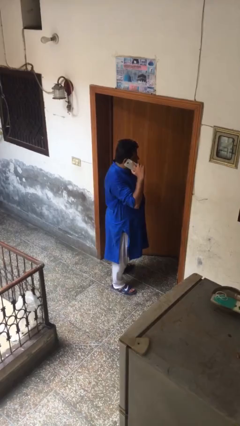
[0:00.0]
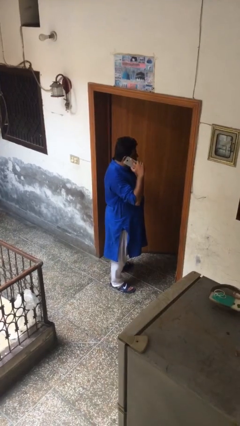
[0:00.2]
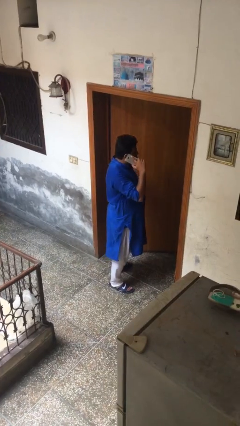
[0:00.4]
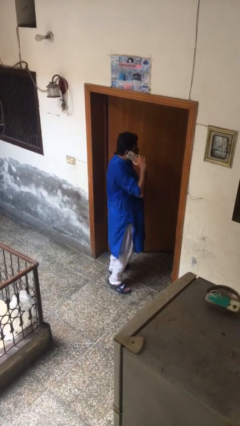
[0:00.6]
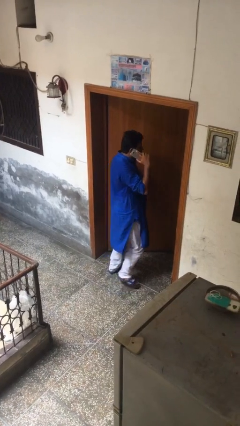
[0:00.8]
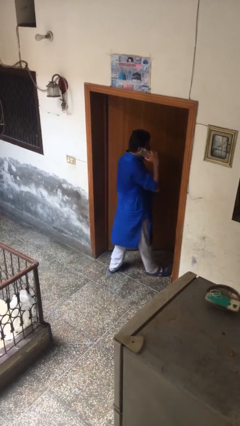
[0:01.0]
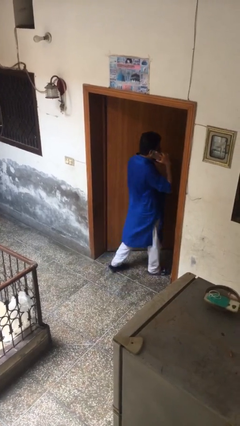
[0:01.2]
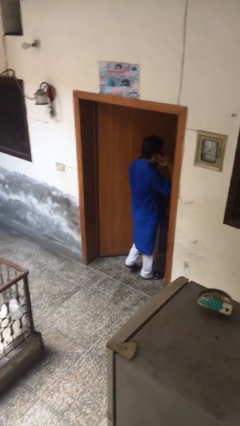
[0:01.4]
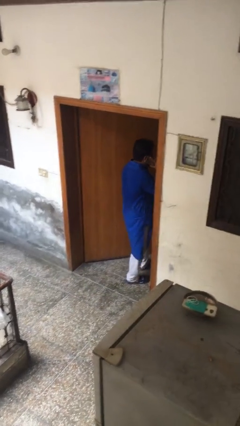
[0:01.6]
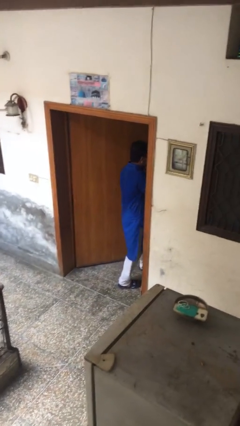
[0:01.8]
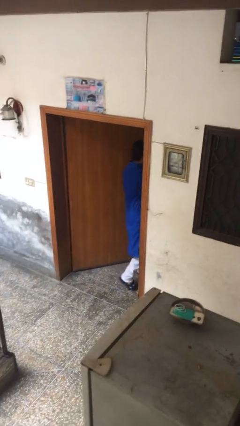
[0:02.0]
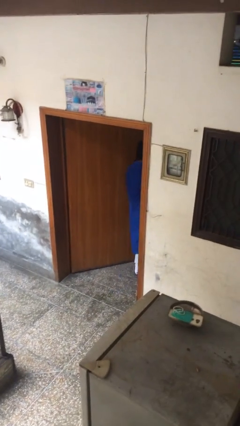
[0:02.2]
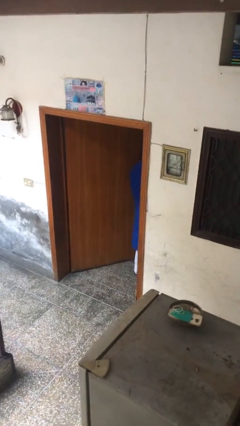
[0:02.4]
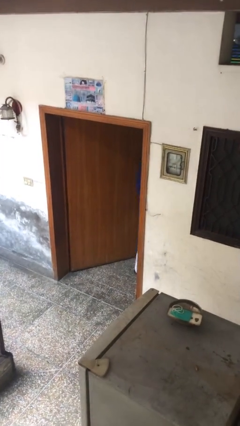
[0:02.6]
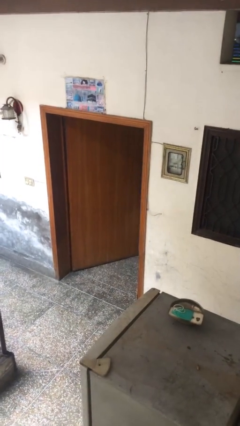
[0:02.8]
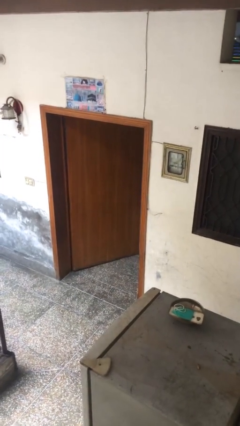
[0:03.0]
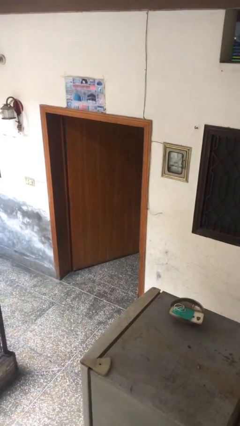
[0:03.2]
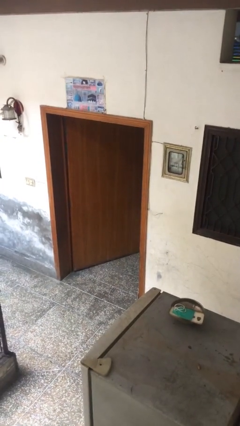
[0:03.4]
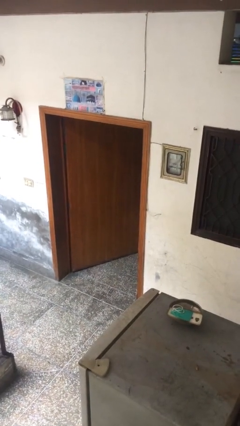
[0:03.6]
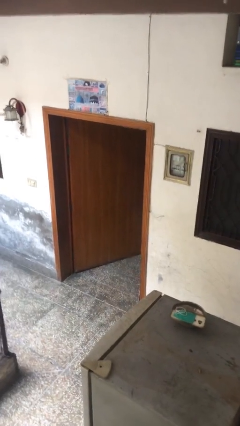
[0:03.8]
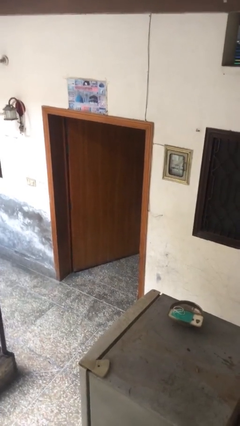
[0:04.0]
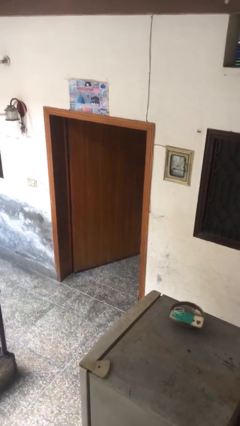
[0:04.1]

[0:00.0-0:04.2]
person exits scene through structure

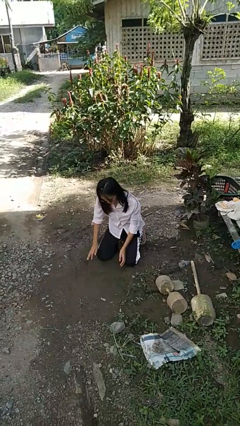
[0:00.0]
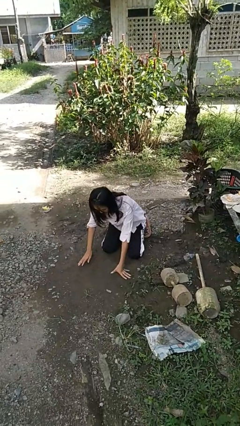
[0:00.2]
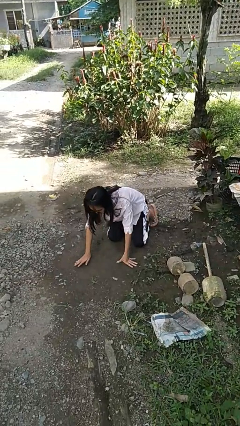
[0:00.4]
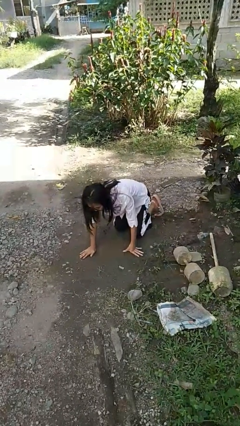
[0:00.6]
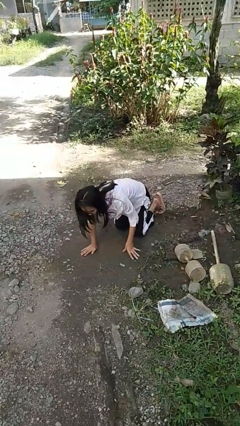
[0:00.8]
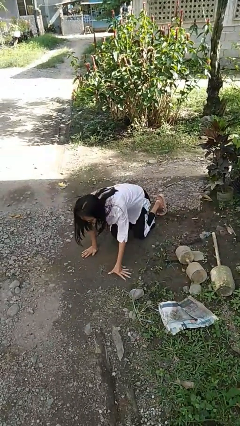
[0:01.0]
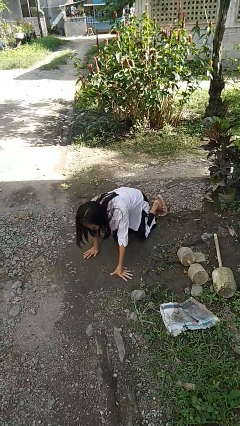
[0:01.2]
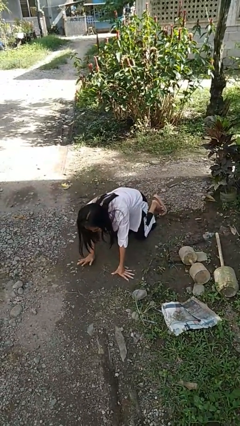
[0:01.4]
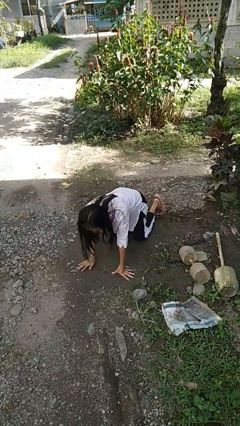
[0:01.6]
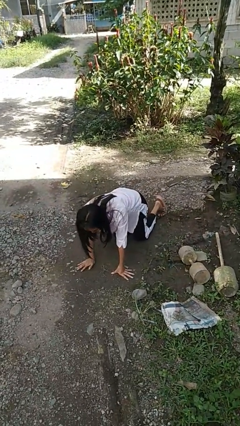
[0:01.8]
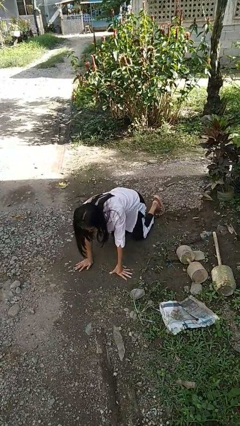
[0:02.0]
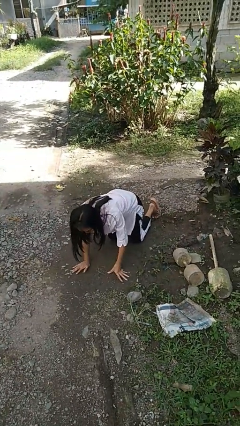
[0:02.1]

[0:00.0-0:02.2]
person crawls

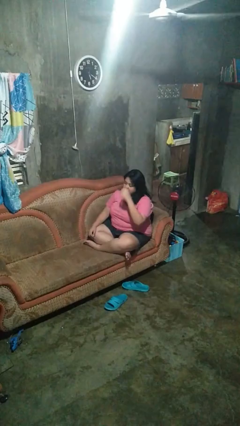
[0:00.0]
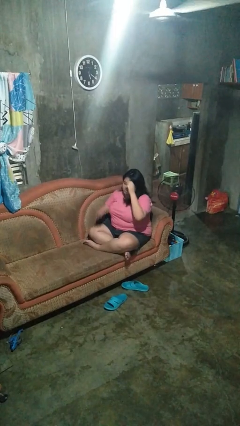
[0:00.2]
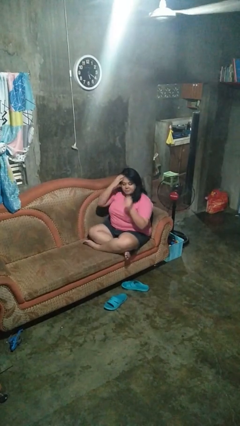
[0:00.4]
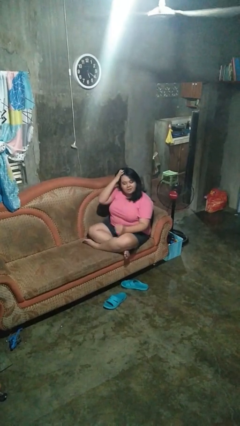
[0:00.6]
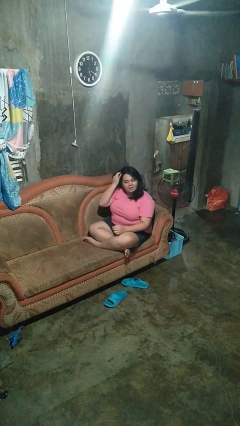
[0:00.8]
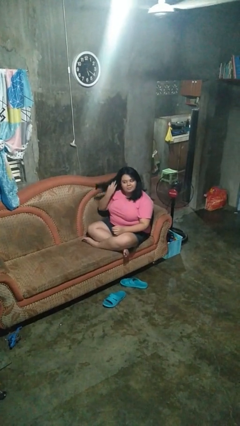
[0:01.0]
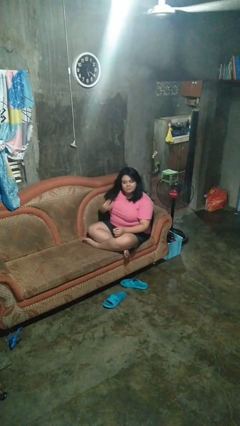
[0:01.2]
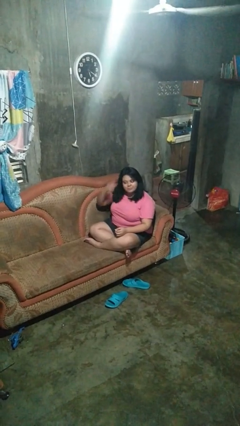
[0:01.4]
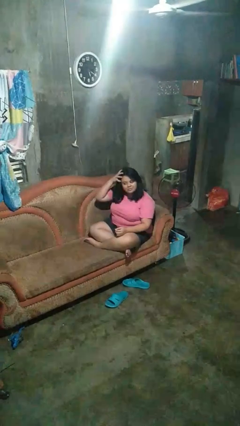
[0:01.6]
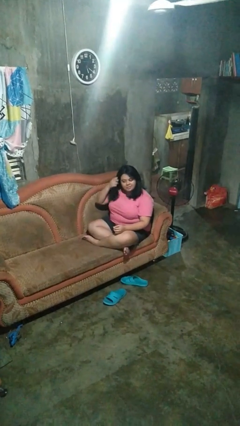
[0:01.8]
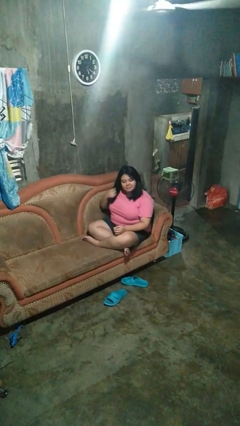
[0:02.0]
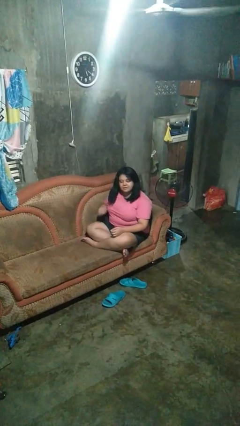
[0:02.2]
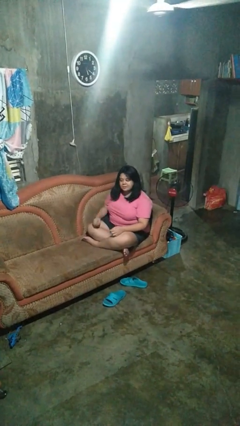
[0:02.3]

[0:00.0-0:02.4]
person strokes hair

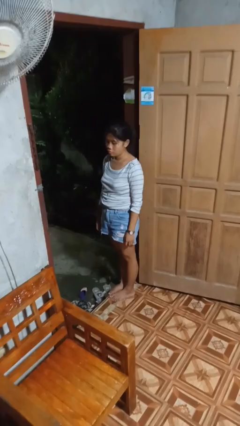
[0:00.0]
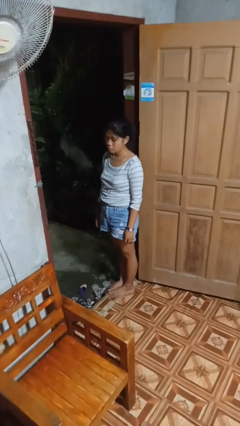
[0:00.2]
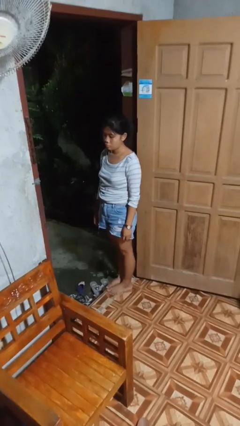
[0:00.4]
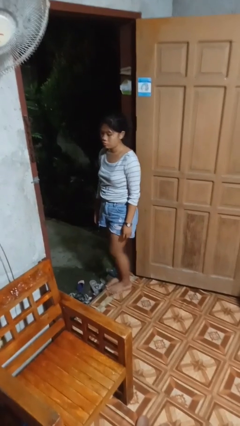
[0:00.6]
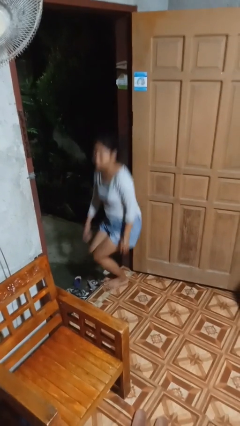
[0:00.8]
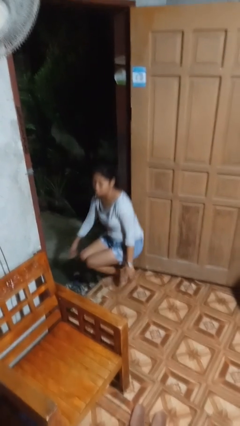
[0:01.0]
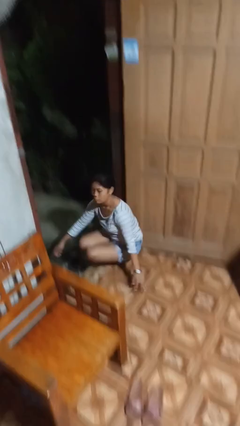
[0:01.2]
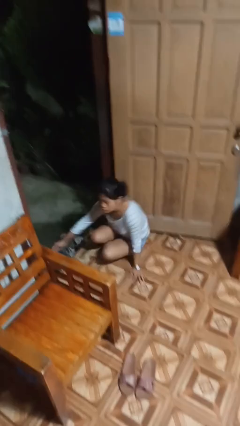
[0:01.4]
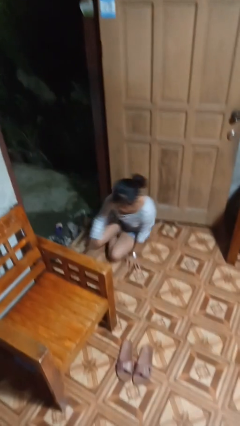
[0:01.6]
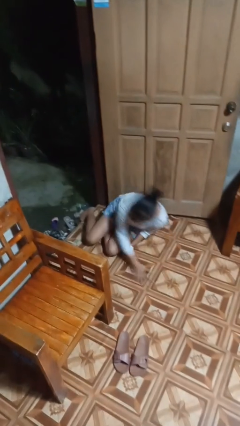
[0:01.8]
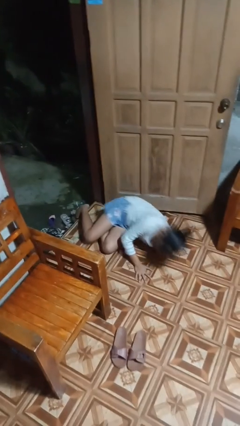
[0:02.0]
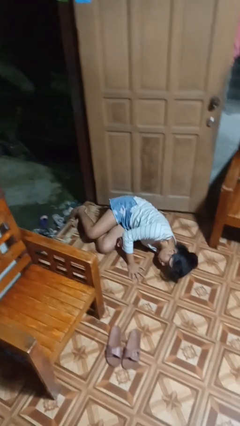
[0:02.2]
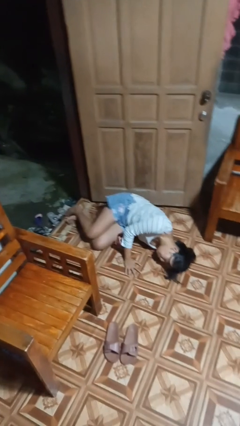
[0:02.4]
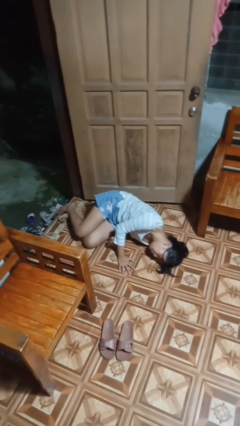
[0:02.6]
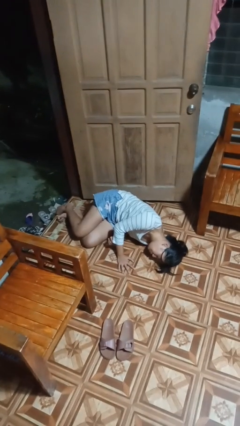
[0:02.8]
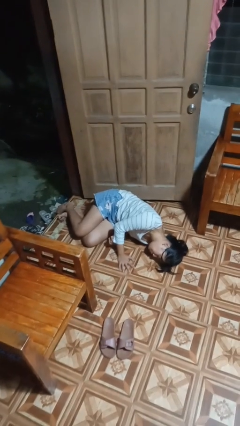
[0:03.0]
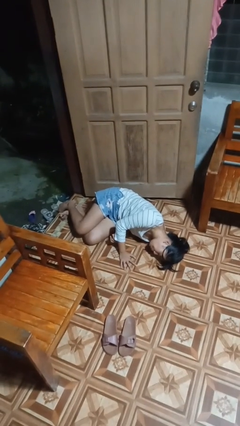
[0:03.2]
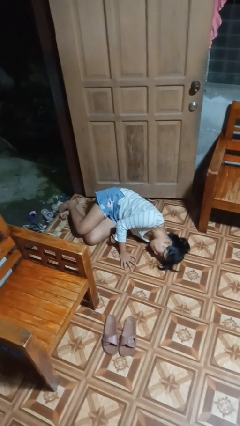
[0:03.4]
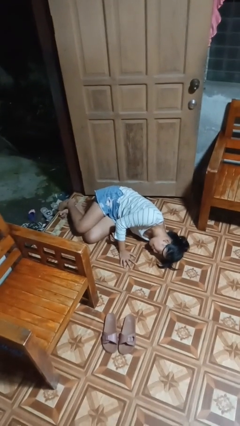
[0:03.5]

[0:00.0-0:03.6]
person falls while standing

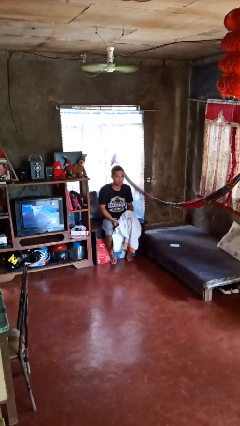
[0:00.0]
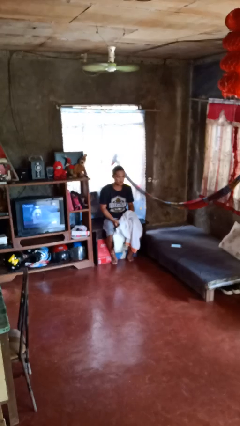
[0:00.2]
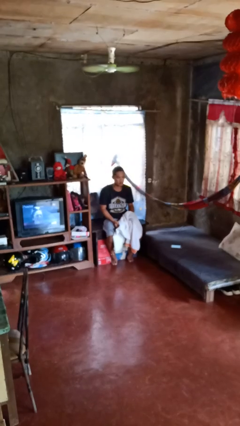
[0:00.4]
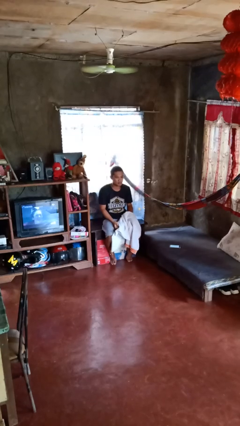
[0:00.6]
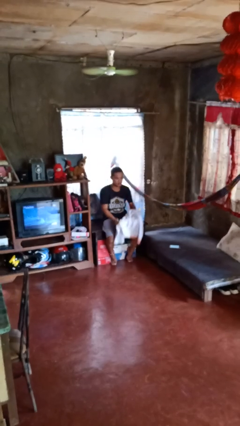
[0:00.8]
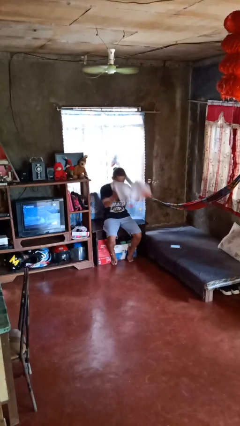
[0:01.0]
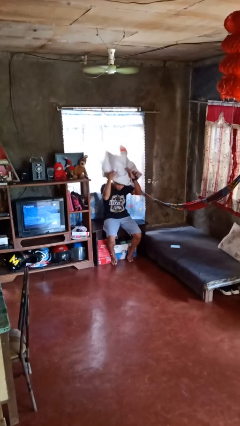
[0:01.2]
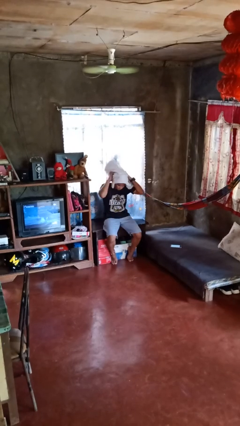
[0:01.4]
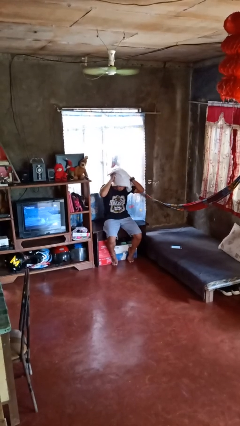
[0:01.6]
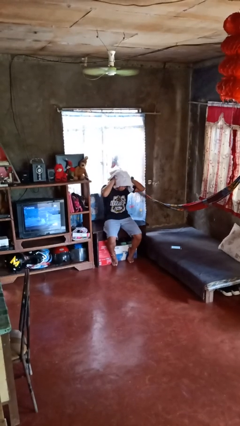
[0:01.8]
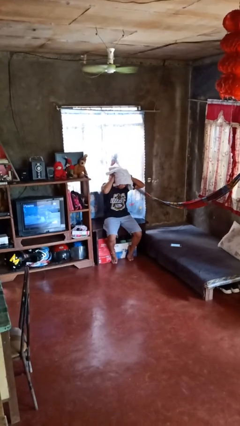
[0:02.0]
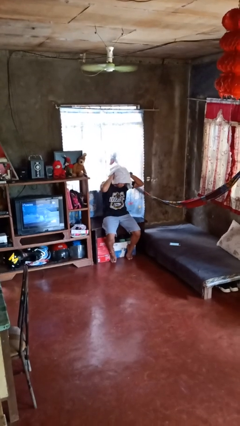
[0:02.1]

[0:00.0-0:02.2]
person wraps box

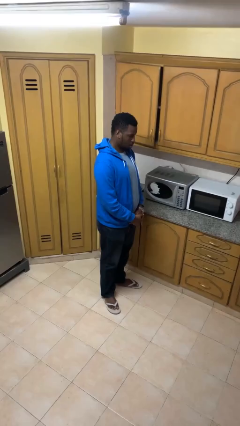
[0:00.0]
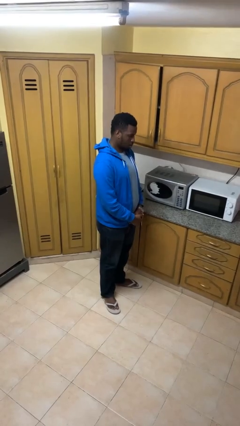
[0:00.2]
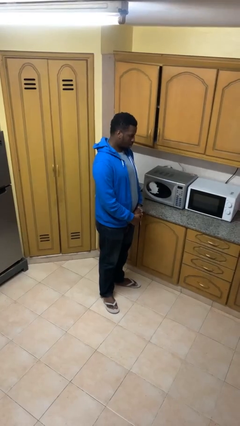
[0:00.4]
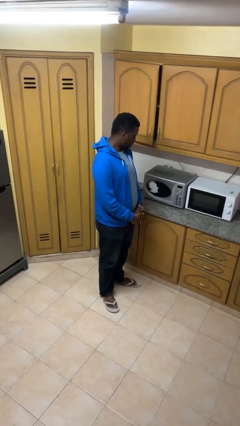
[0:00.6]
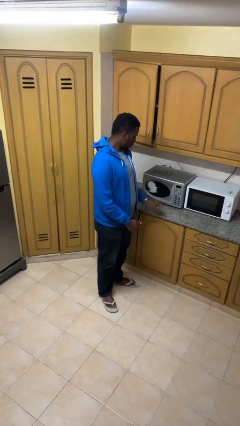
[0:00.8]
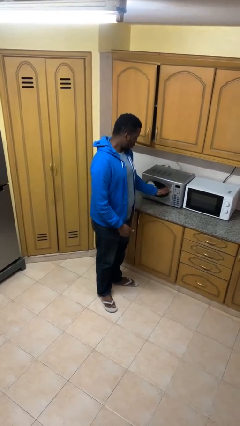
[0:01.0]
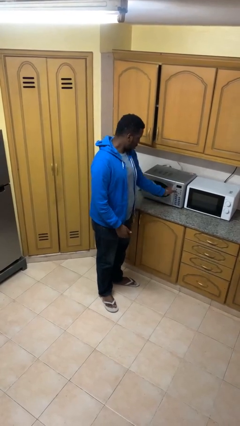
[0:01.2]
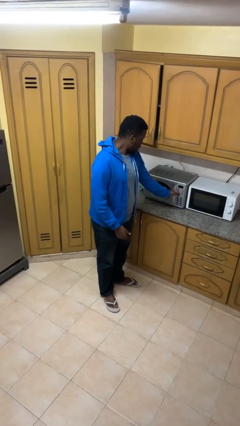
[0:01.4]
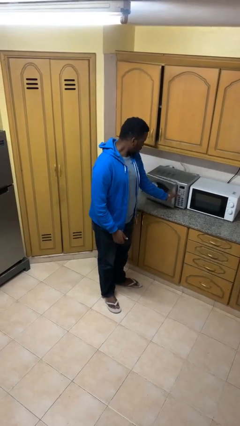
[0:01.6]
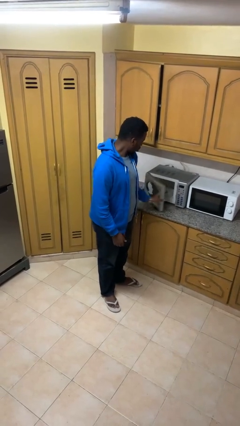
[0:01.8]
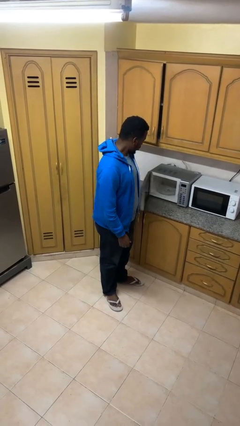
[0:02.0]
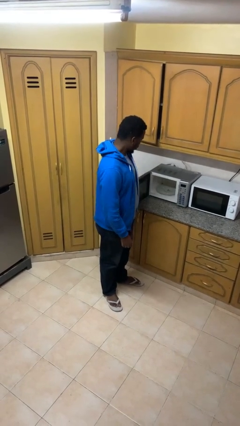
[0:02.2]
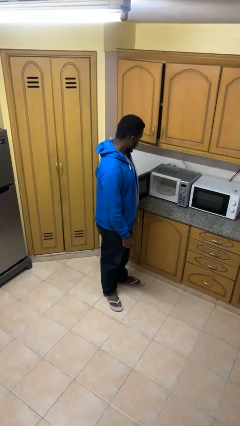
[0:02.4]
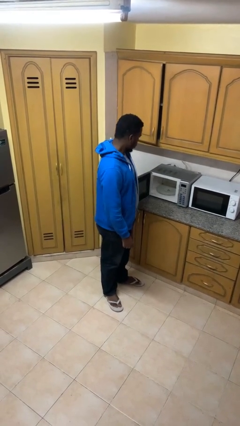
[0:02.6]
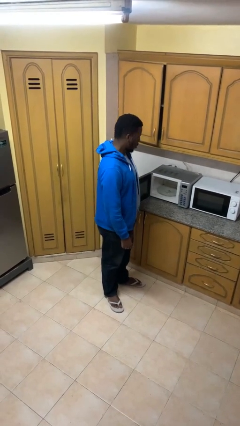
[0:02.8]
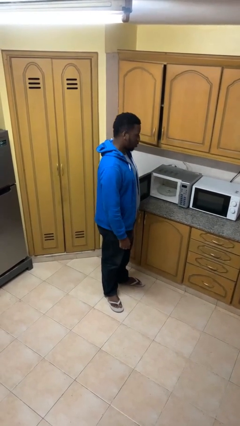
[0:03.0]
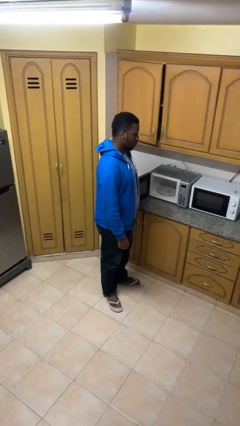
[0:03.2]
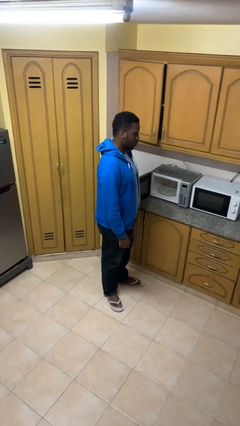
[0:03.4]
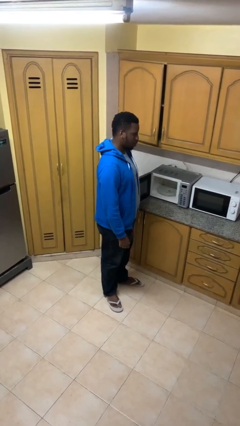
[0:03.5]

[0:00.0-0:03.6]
person opens microwave
